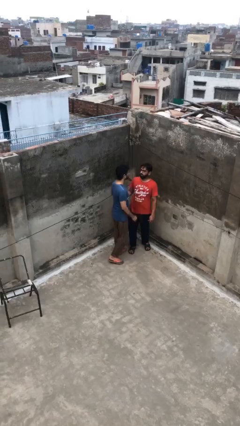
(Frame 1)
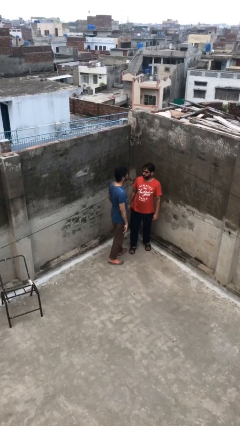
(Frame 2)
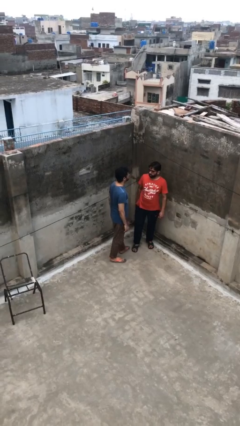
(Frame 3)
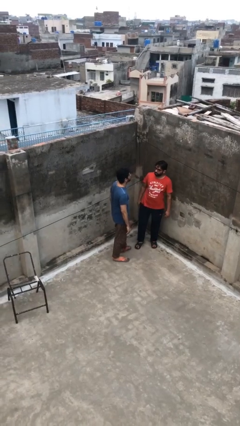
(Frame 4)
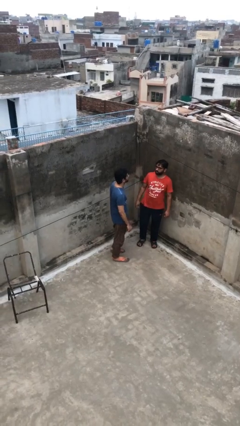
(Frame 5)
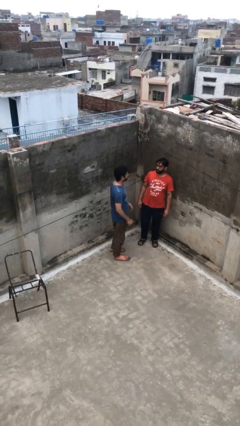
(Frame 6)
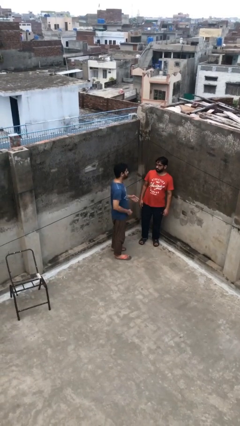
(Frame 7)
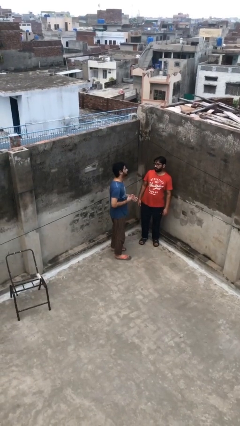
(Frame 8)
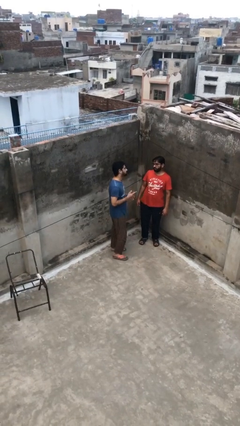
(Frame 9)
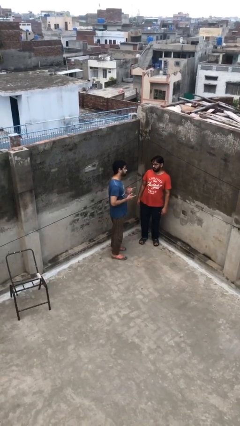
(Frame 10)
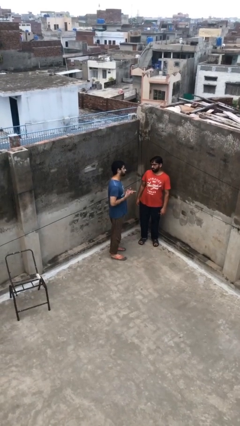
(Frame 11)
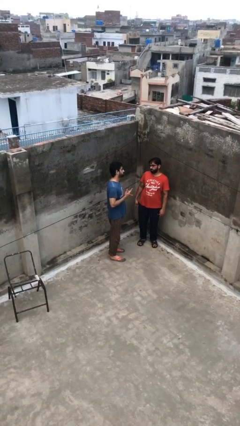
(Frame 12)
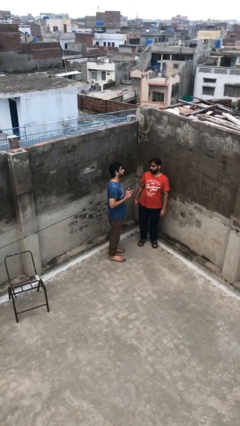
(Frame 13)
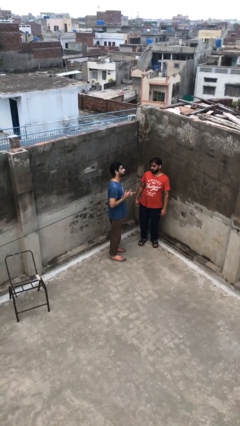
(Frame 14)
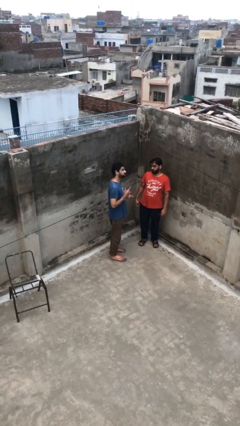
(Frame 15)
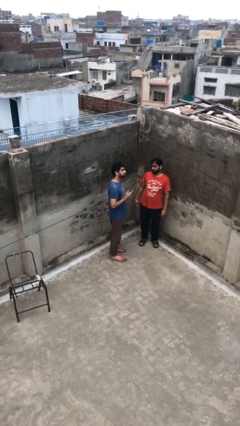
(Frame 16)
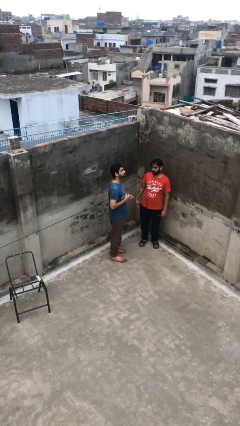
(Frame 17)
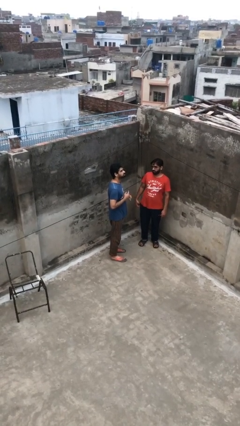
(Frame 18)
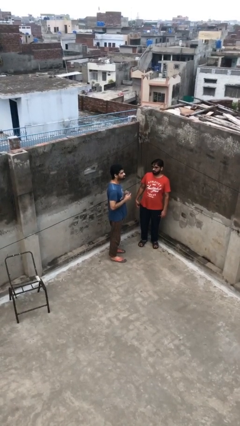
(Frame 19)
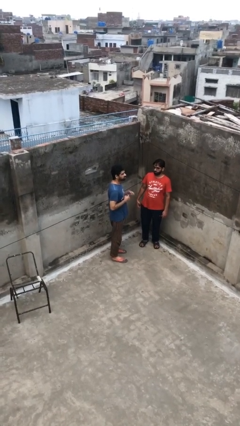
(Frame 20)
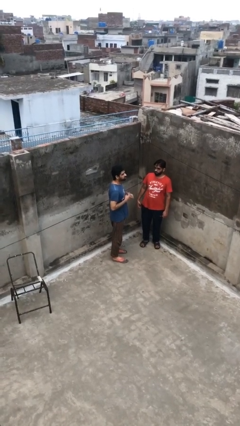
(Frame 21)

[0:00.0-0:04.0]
person talks to person

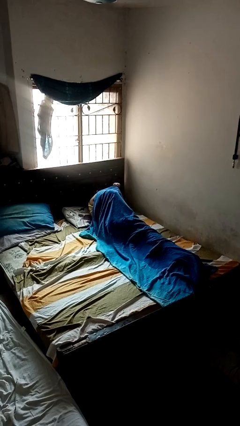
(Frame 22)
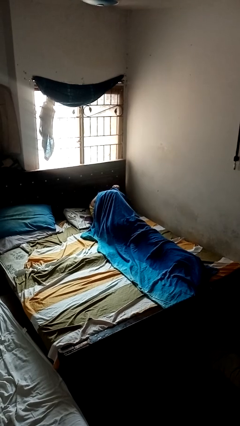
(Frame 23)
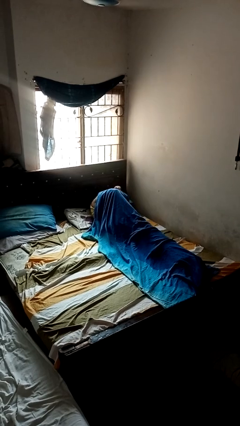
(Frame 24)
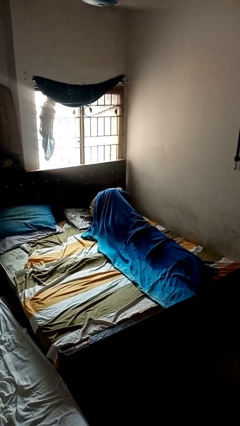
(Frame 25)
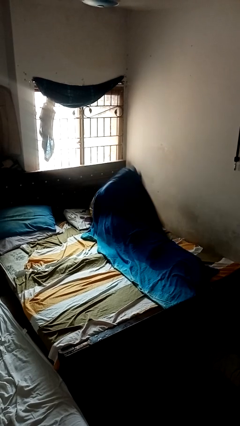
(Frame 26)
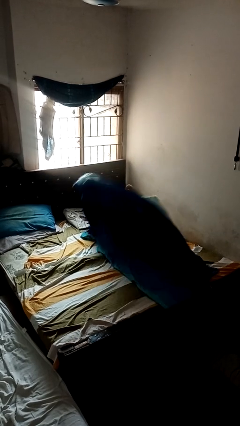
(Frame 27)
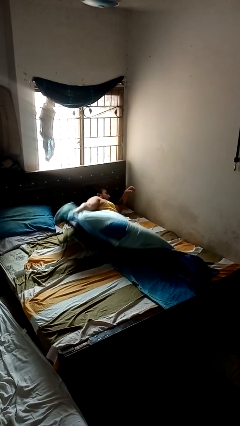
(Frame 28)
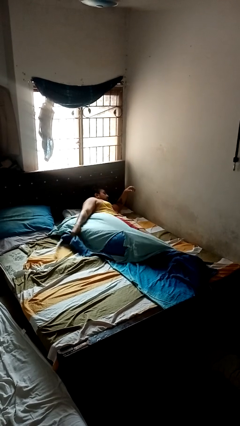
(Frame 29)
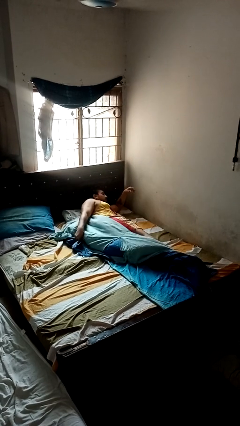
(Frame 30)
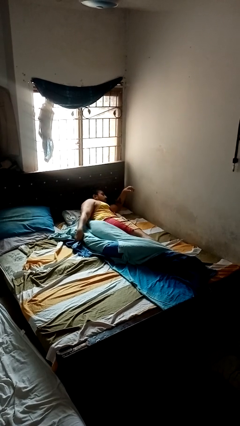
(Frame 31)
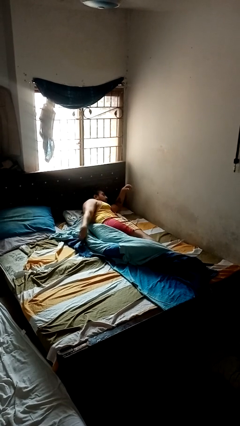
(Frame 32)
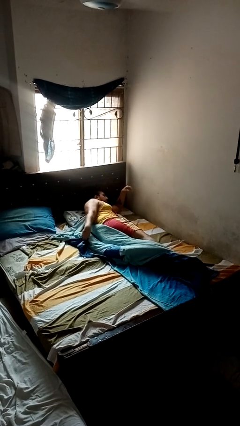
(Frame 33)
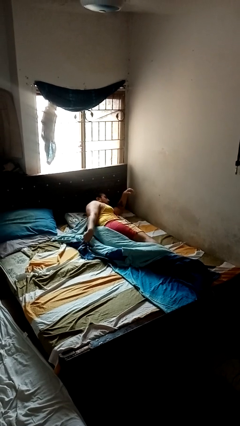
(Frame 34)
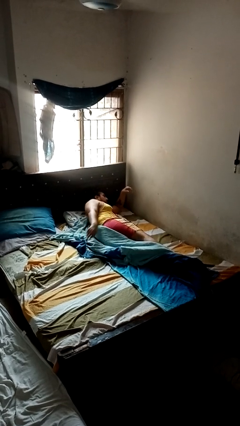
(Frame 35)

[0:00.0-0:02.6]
person uncovers with blanket

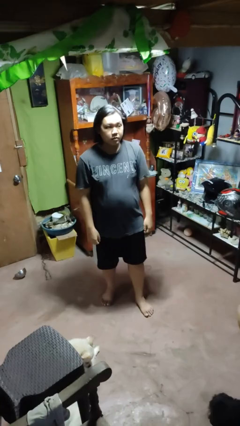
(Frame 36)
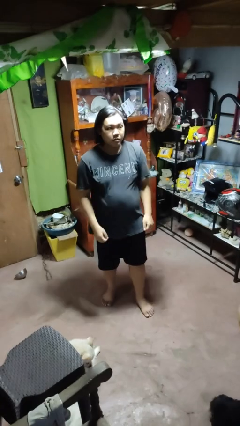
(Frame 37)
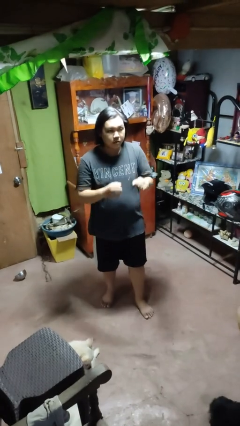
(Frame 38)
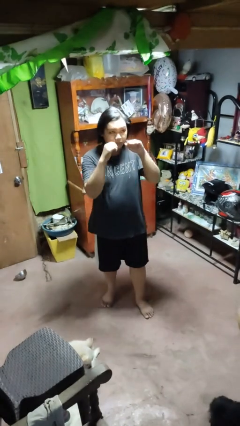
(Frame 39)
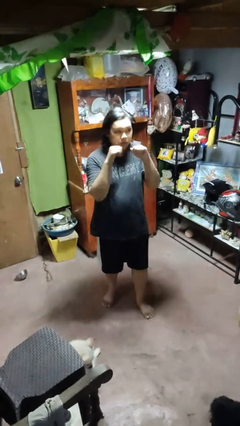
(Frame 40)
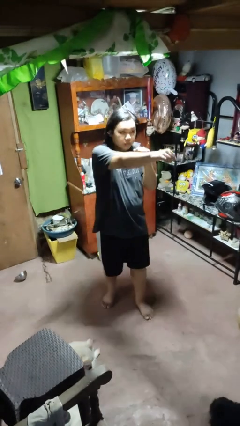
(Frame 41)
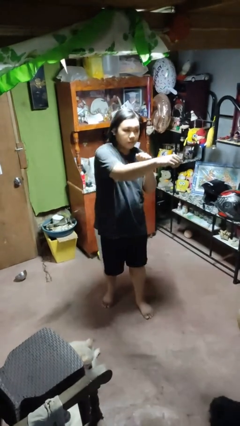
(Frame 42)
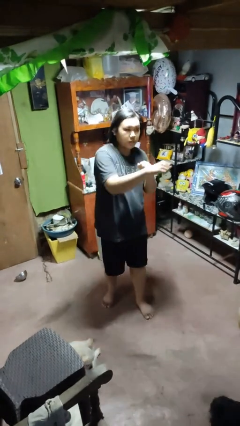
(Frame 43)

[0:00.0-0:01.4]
person punches

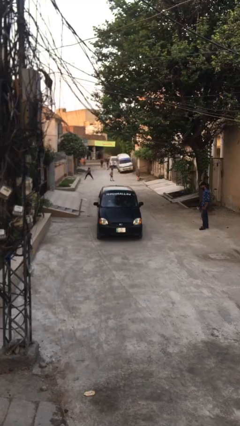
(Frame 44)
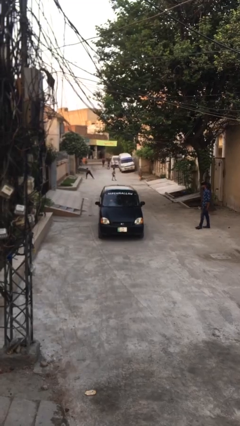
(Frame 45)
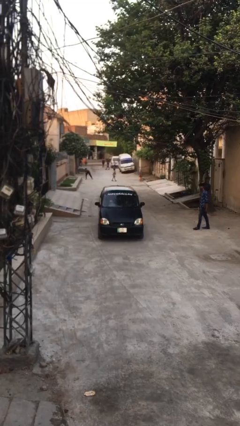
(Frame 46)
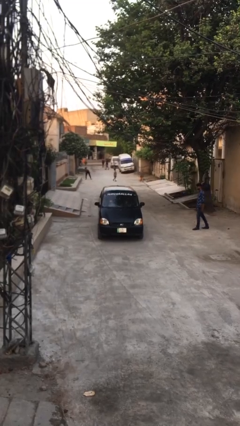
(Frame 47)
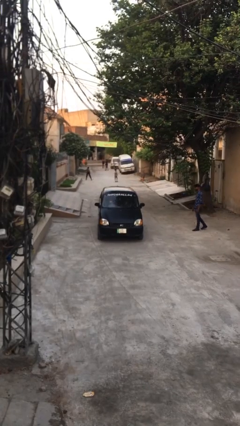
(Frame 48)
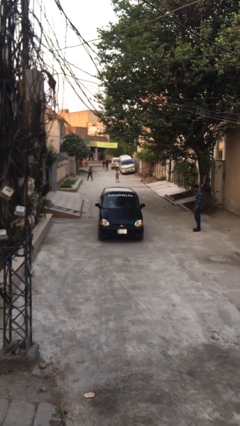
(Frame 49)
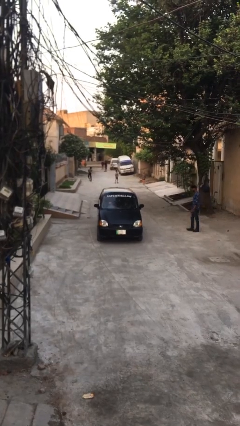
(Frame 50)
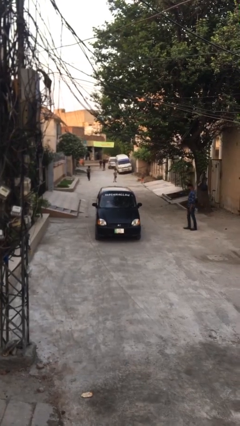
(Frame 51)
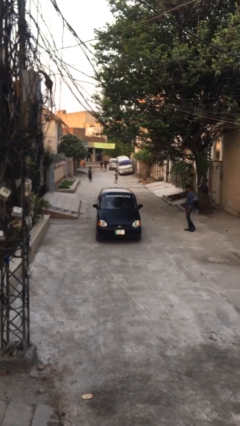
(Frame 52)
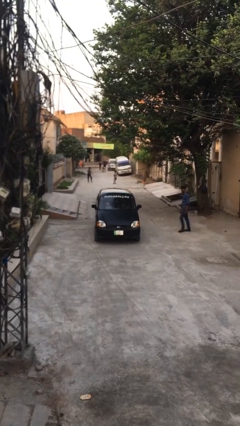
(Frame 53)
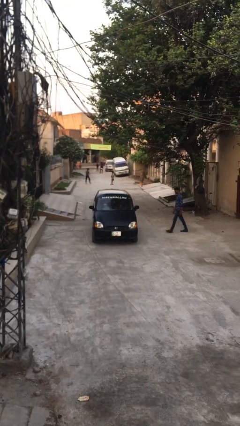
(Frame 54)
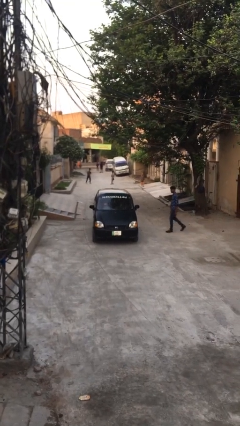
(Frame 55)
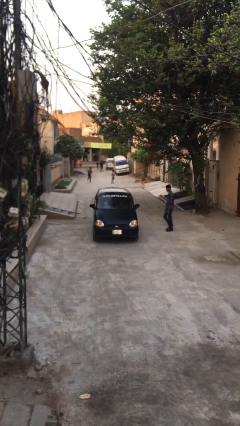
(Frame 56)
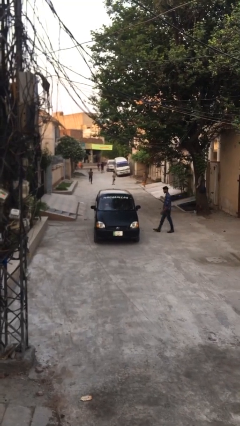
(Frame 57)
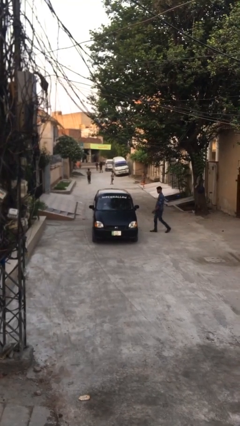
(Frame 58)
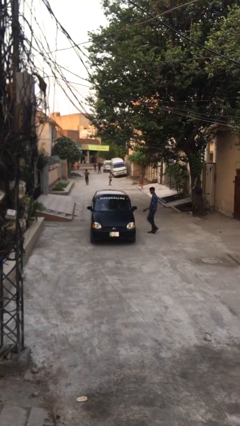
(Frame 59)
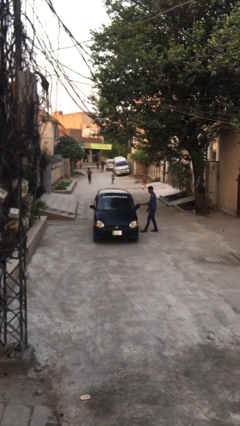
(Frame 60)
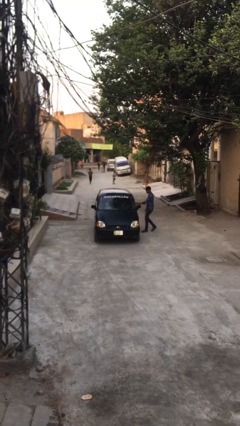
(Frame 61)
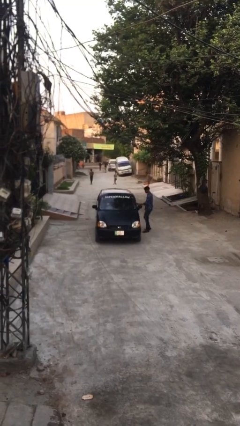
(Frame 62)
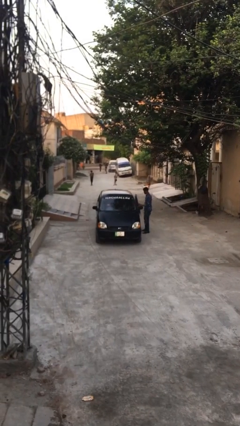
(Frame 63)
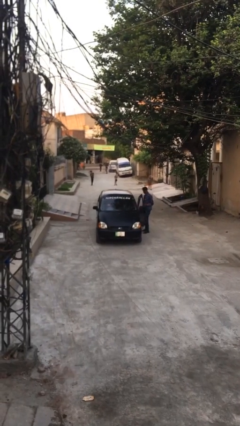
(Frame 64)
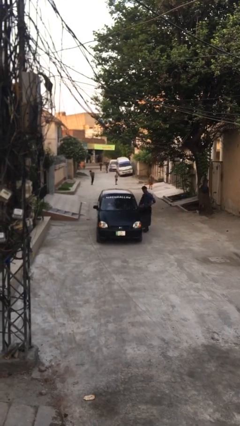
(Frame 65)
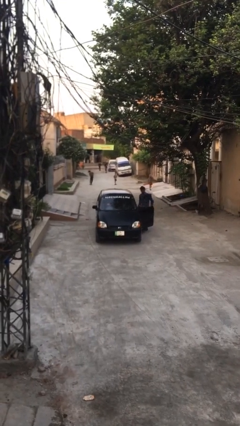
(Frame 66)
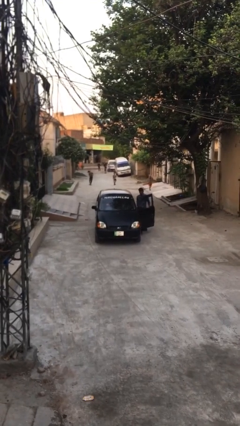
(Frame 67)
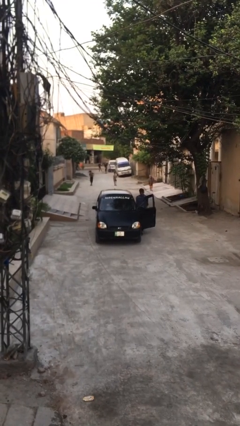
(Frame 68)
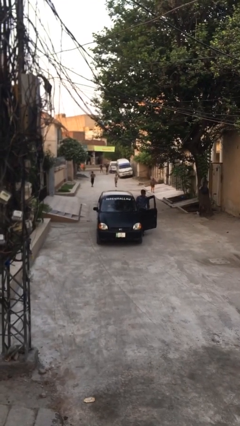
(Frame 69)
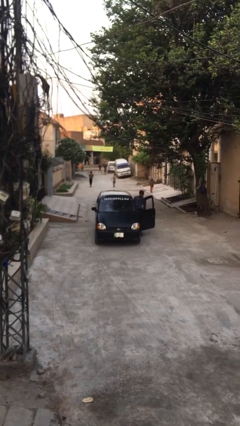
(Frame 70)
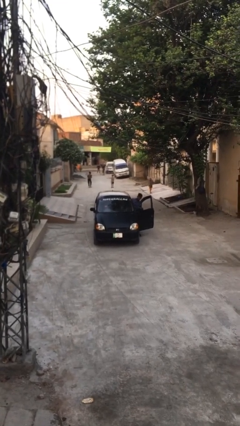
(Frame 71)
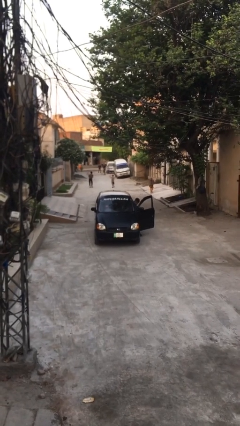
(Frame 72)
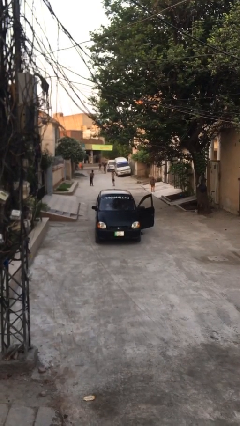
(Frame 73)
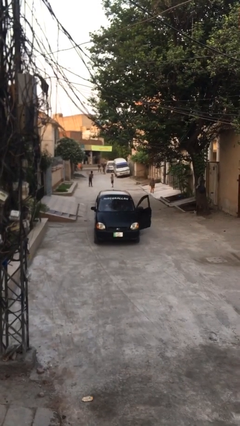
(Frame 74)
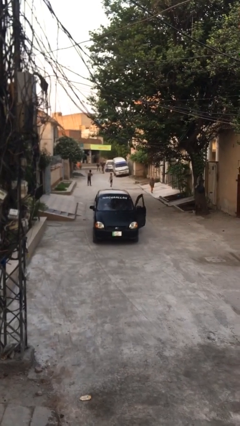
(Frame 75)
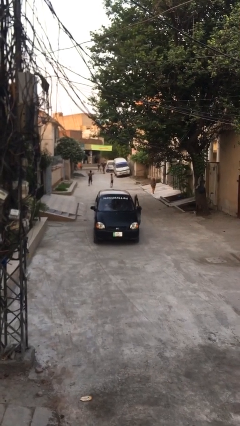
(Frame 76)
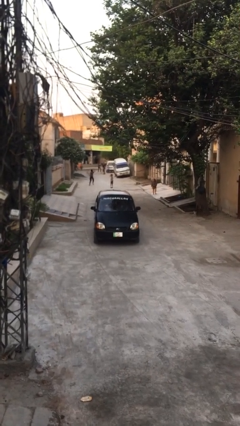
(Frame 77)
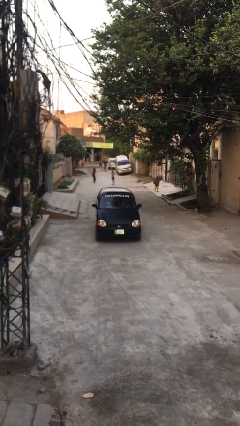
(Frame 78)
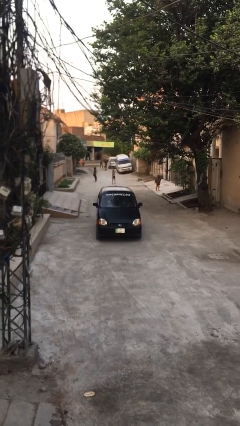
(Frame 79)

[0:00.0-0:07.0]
car picks up person

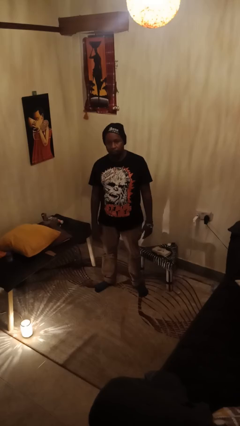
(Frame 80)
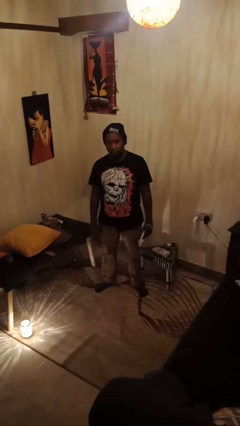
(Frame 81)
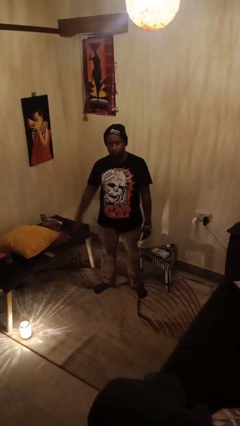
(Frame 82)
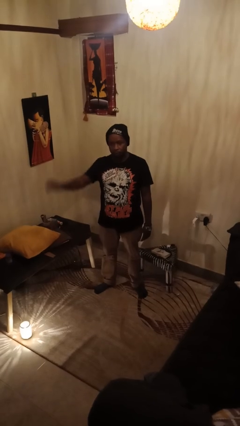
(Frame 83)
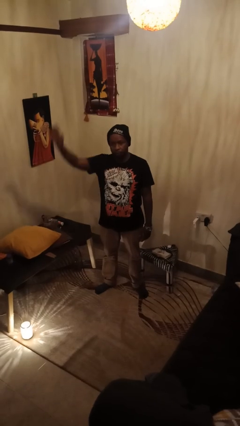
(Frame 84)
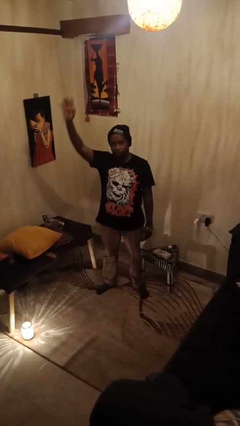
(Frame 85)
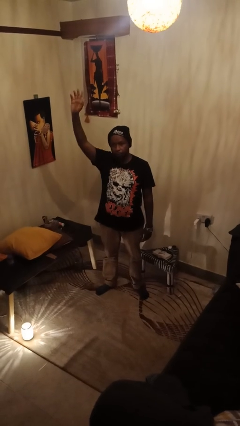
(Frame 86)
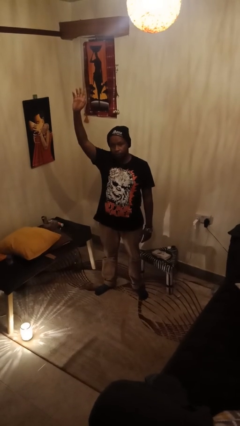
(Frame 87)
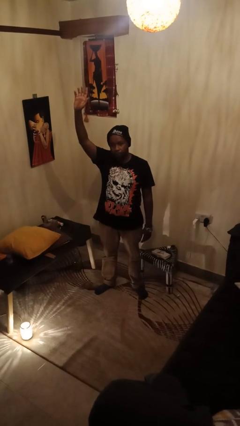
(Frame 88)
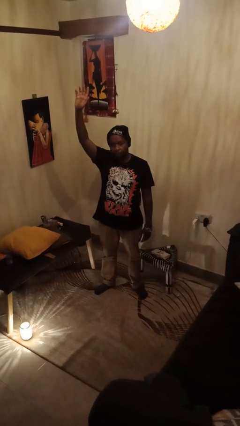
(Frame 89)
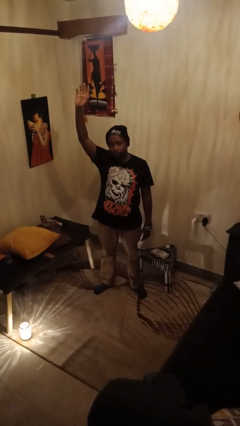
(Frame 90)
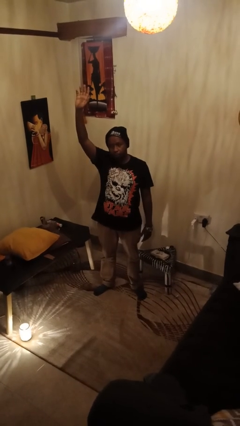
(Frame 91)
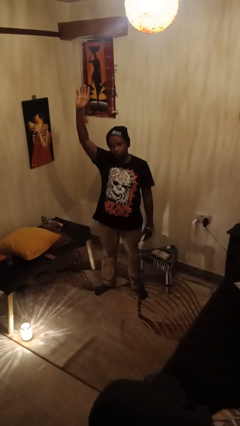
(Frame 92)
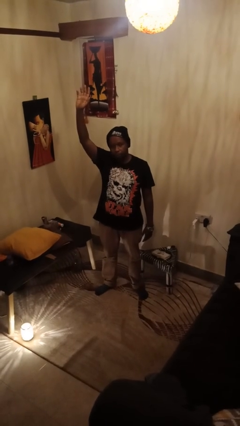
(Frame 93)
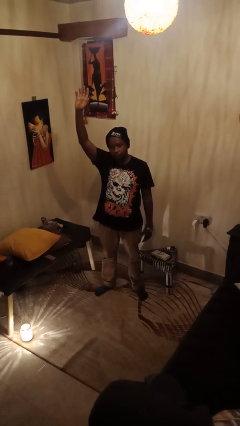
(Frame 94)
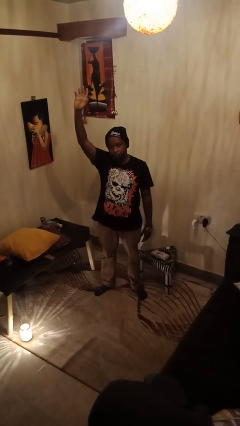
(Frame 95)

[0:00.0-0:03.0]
person gestures raise hand
